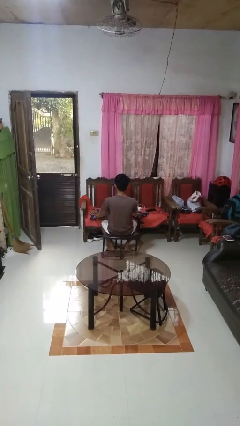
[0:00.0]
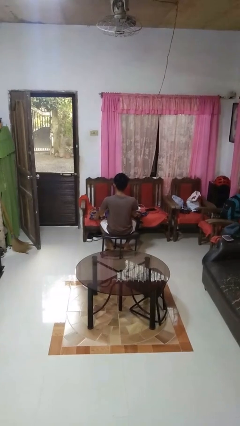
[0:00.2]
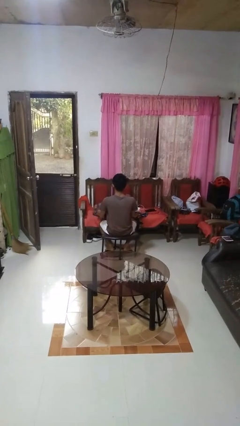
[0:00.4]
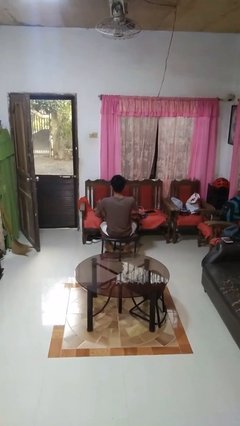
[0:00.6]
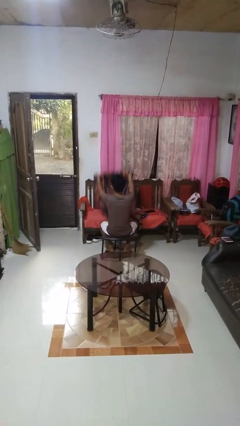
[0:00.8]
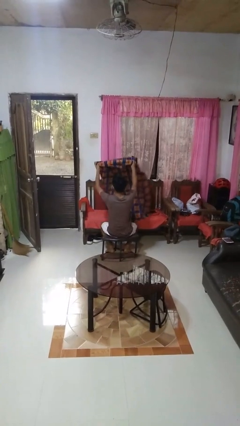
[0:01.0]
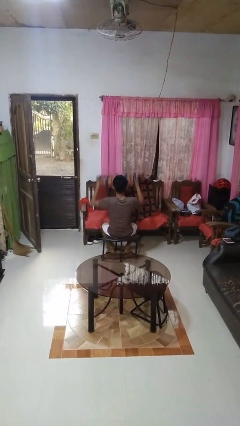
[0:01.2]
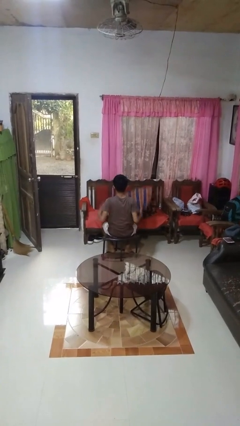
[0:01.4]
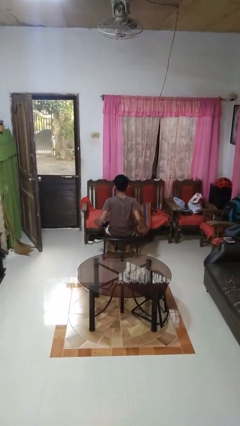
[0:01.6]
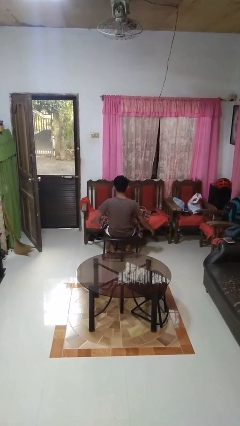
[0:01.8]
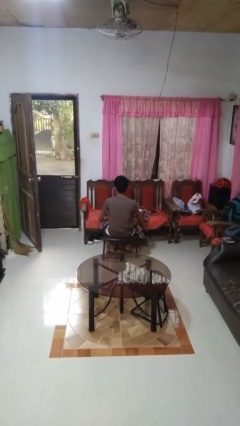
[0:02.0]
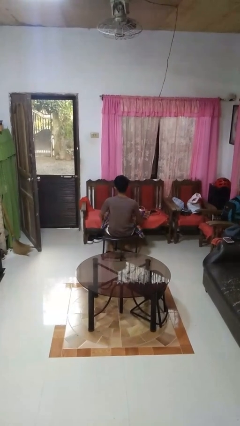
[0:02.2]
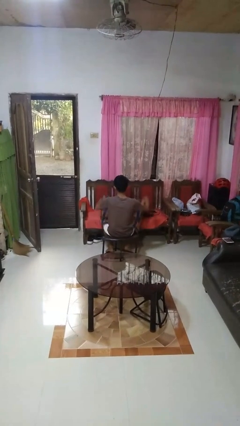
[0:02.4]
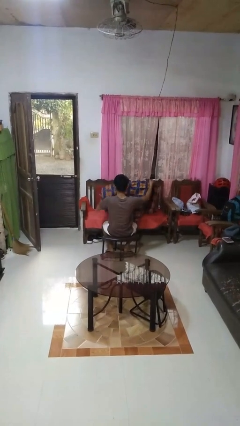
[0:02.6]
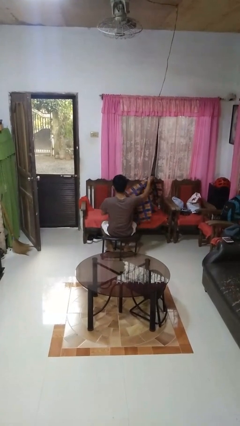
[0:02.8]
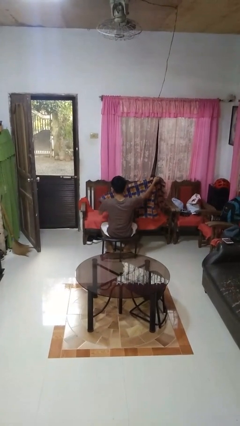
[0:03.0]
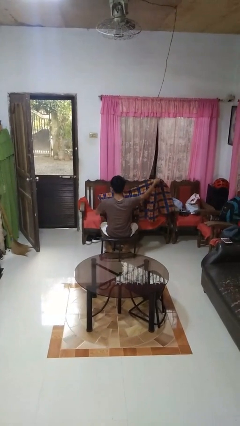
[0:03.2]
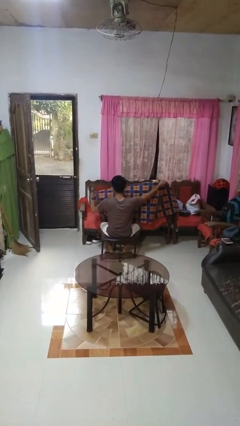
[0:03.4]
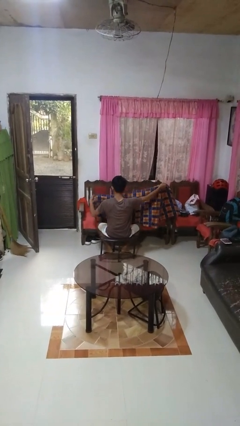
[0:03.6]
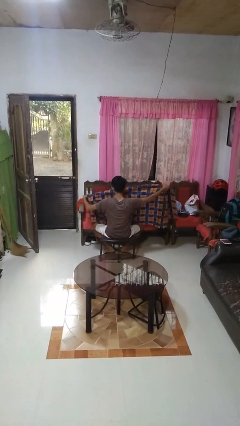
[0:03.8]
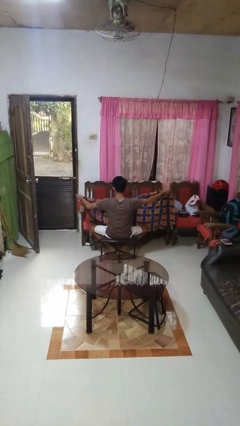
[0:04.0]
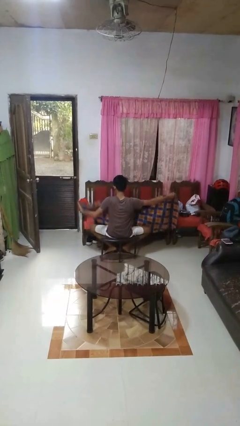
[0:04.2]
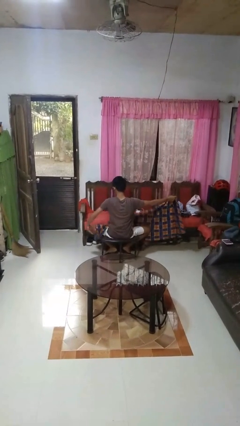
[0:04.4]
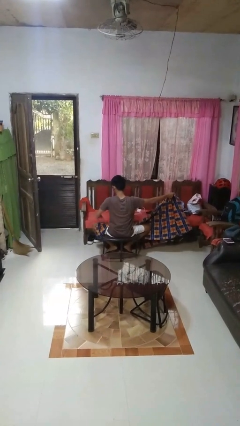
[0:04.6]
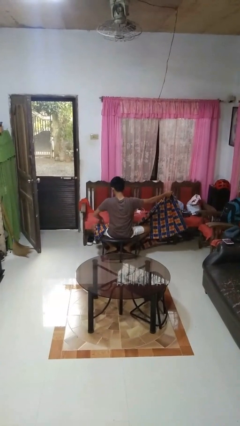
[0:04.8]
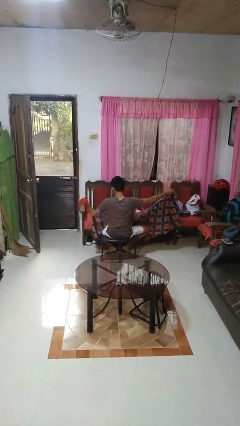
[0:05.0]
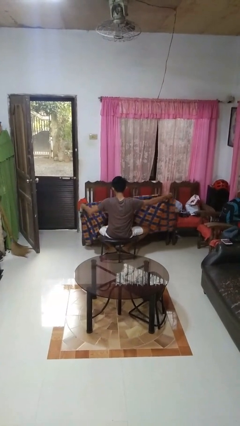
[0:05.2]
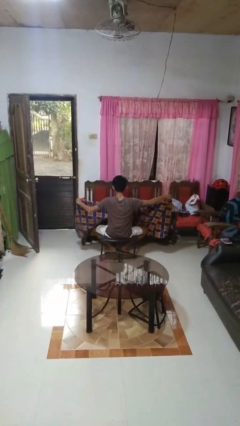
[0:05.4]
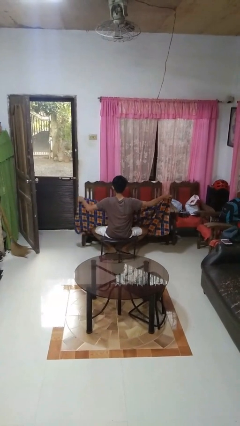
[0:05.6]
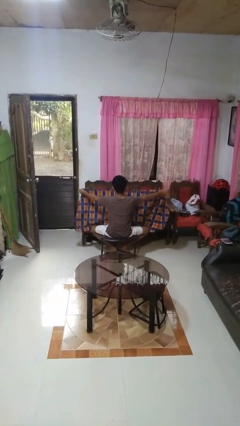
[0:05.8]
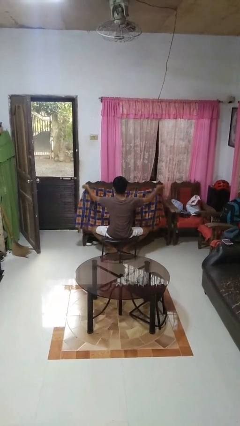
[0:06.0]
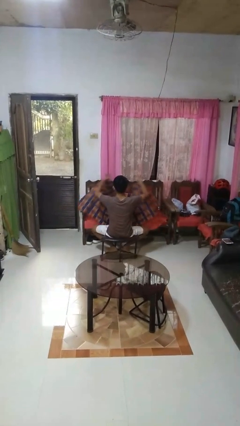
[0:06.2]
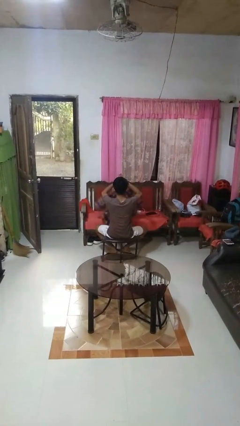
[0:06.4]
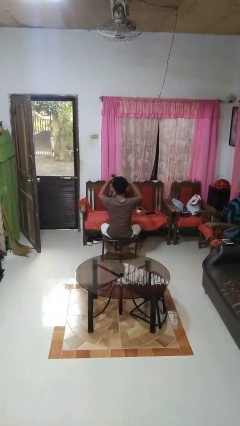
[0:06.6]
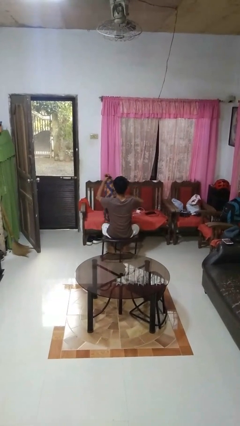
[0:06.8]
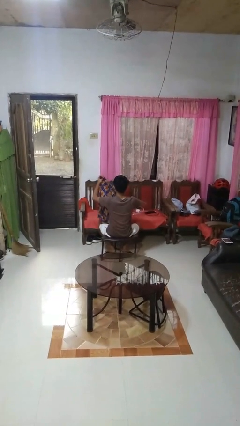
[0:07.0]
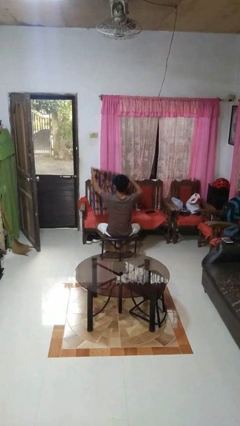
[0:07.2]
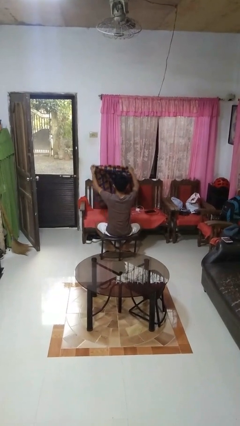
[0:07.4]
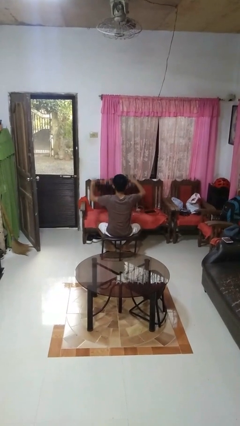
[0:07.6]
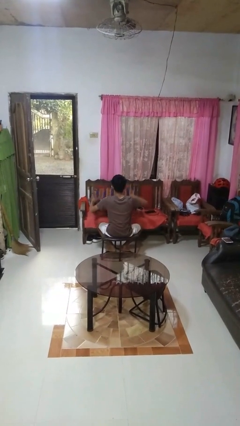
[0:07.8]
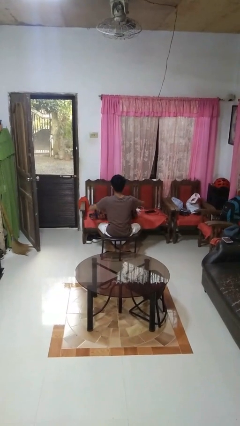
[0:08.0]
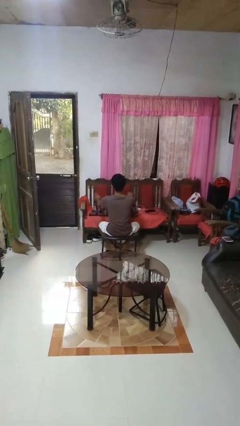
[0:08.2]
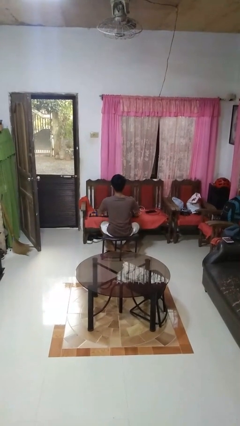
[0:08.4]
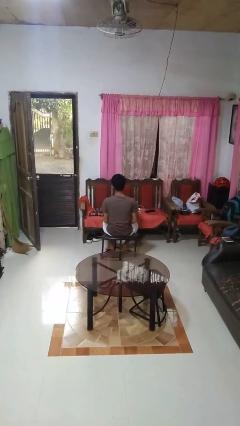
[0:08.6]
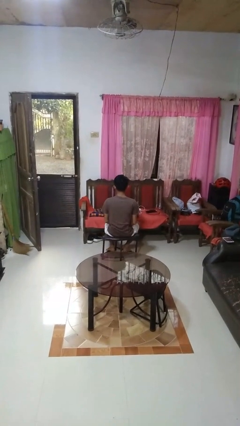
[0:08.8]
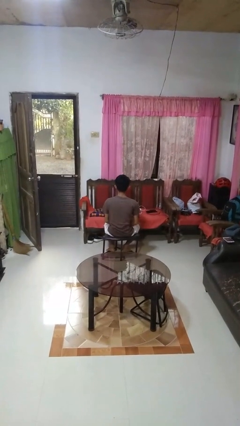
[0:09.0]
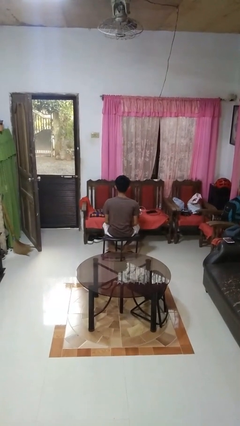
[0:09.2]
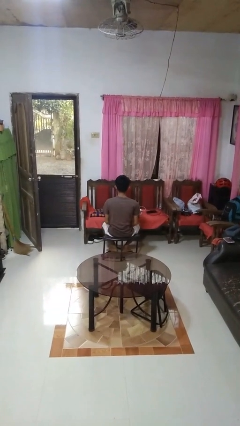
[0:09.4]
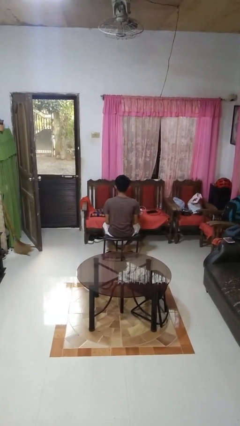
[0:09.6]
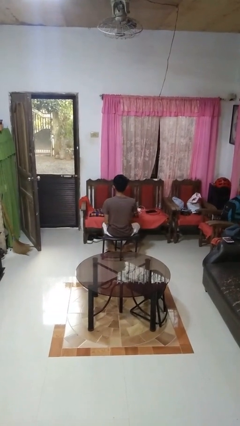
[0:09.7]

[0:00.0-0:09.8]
person folds blanket

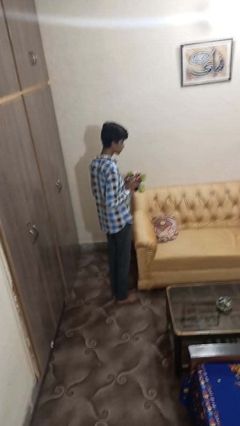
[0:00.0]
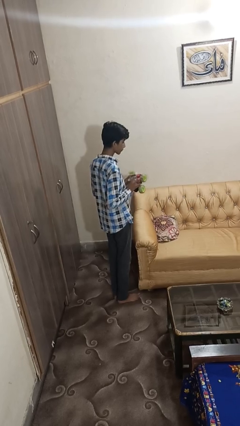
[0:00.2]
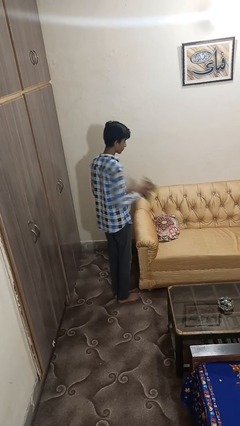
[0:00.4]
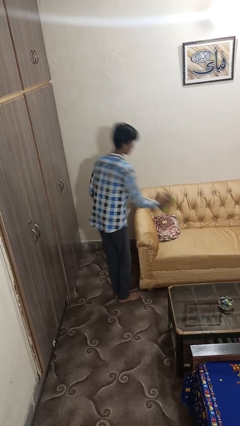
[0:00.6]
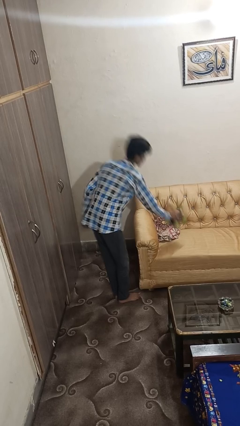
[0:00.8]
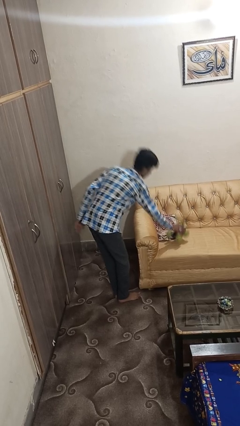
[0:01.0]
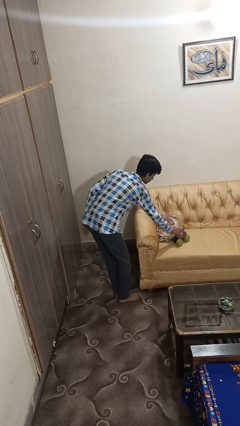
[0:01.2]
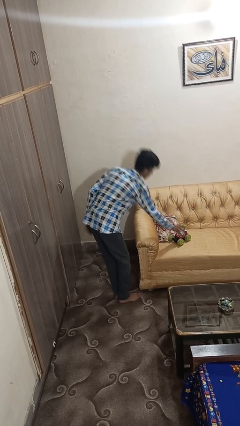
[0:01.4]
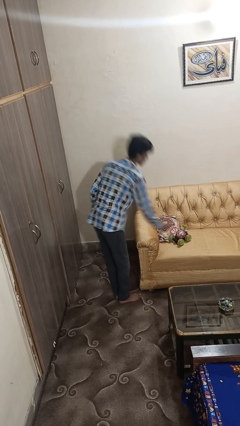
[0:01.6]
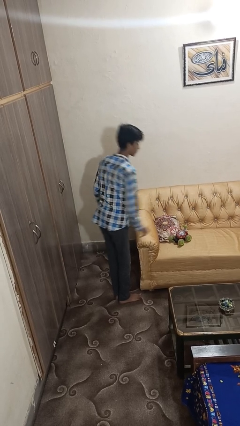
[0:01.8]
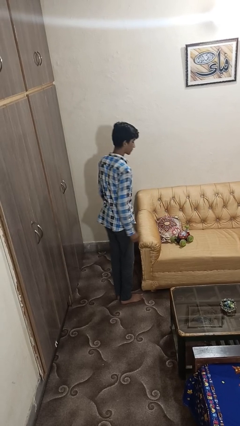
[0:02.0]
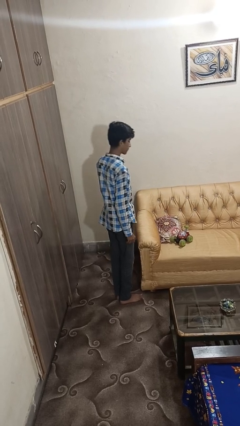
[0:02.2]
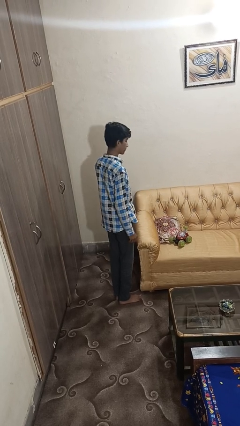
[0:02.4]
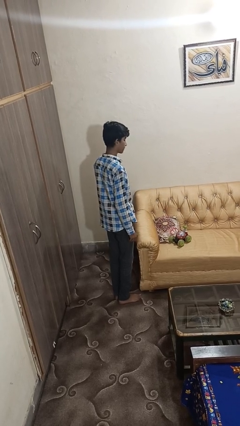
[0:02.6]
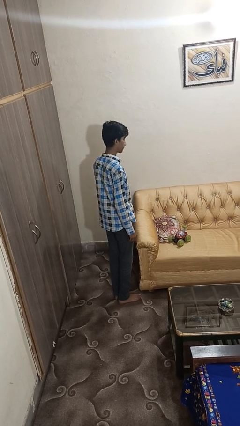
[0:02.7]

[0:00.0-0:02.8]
person puts down object on couch

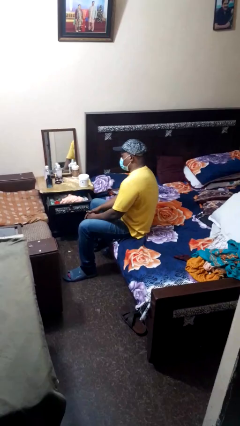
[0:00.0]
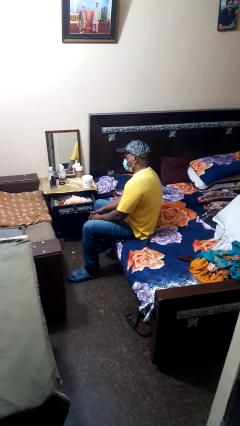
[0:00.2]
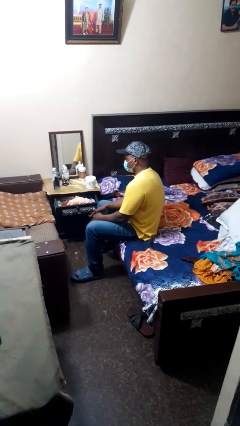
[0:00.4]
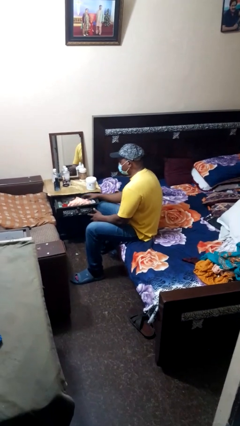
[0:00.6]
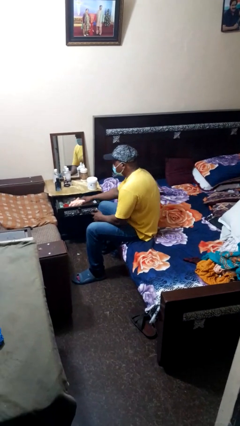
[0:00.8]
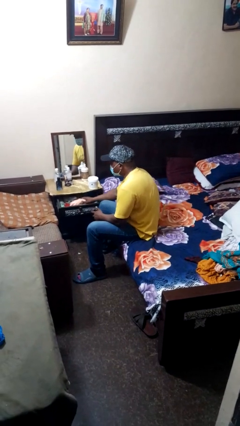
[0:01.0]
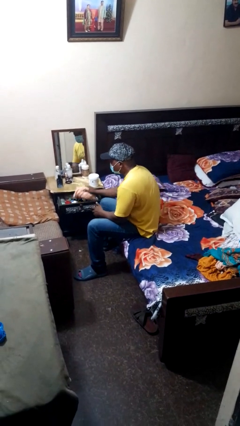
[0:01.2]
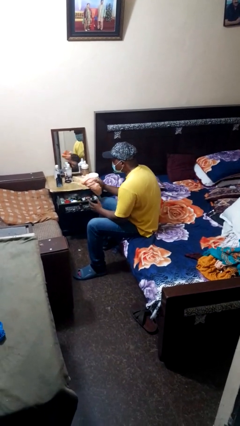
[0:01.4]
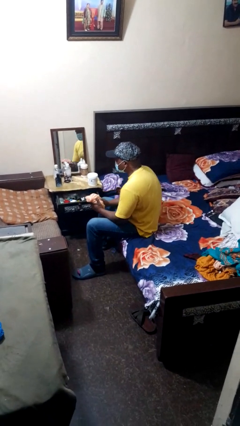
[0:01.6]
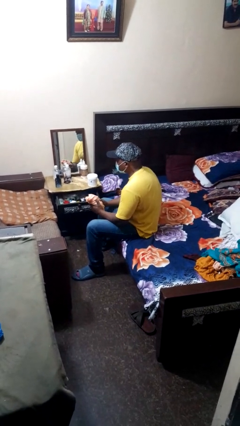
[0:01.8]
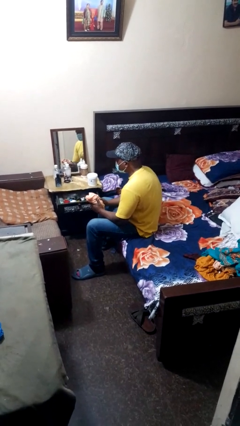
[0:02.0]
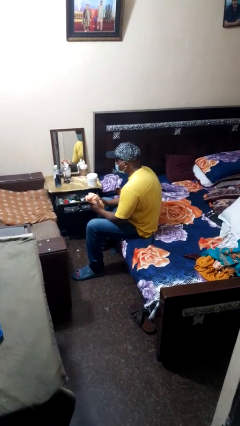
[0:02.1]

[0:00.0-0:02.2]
person takes clothes from dresser

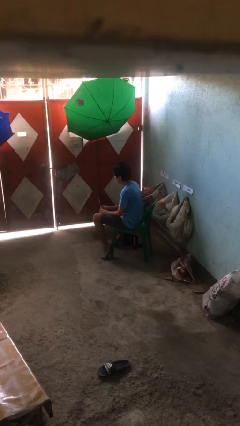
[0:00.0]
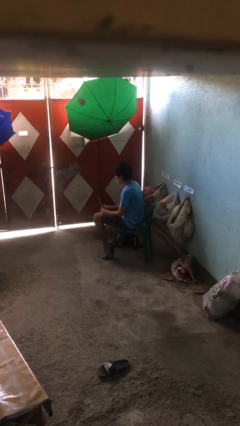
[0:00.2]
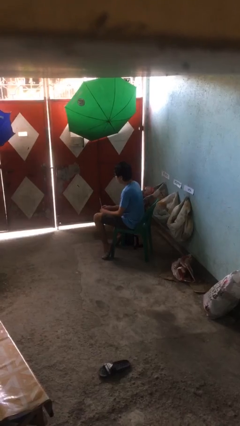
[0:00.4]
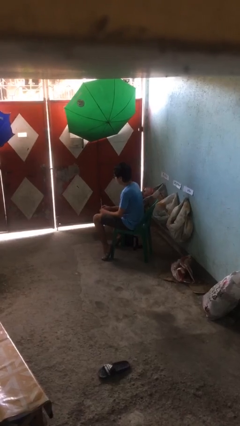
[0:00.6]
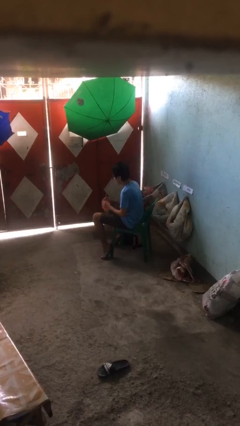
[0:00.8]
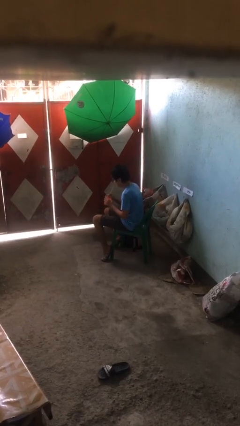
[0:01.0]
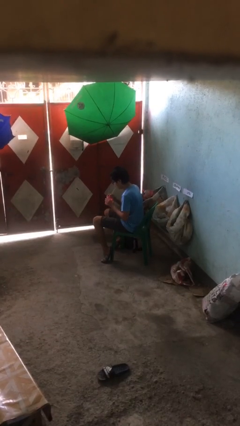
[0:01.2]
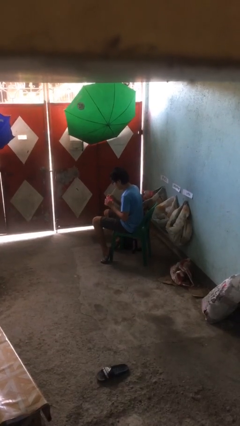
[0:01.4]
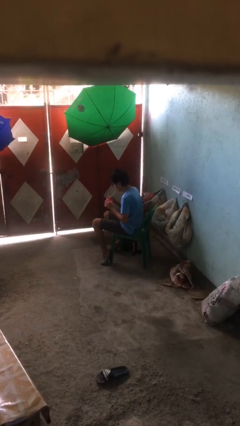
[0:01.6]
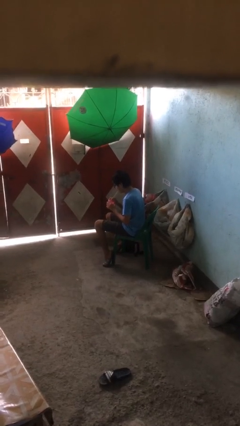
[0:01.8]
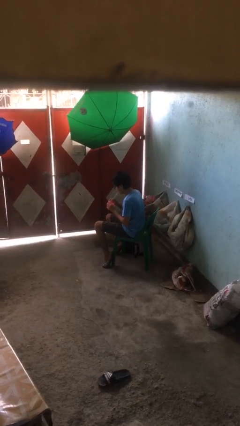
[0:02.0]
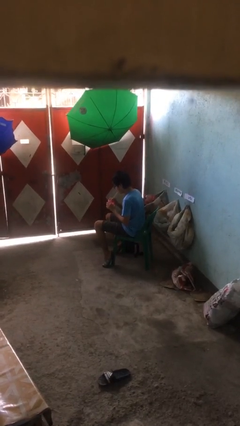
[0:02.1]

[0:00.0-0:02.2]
person drinks from straw

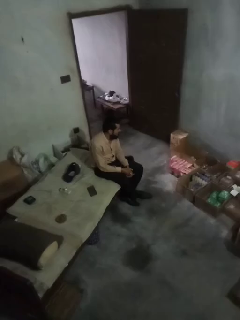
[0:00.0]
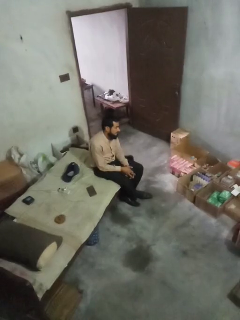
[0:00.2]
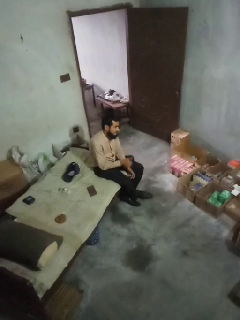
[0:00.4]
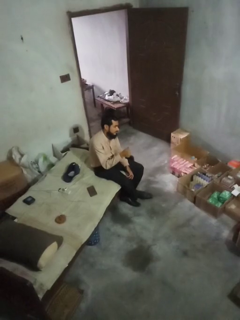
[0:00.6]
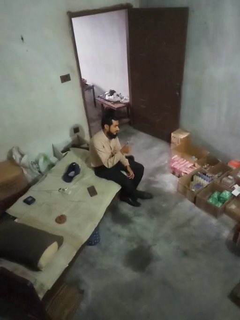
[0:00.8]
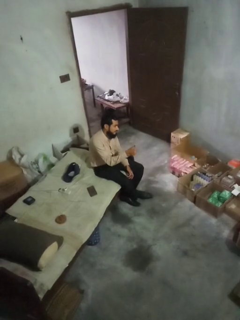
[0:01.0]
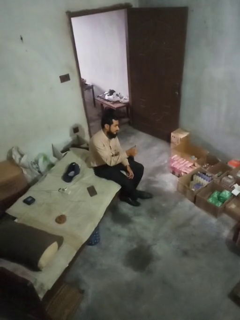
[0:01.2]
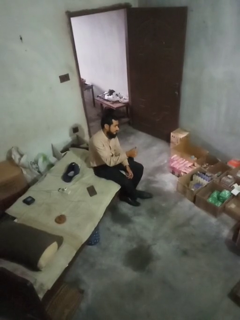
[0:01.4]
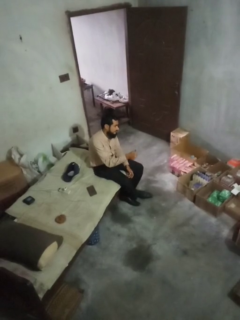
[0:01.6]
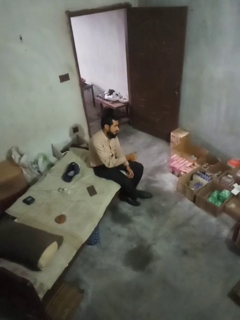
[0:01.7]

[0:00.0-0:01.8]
person gestures thumbs up
